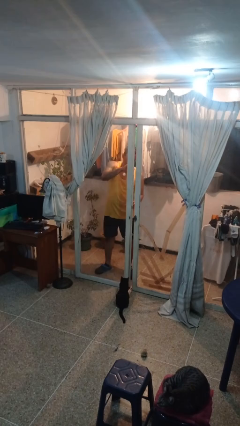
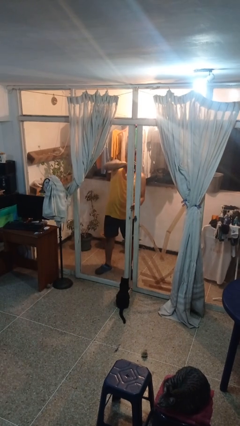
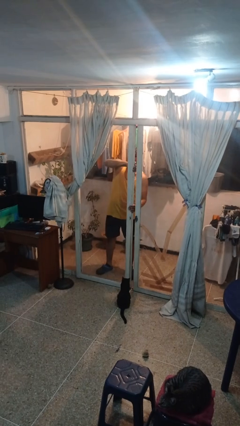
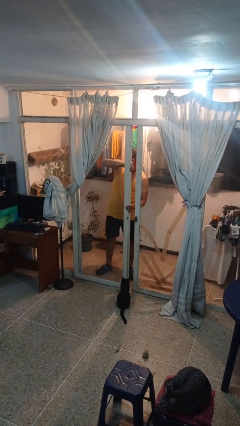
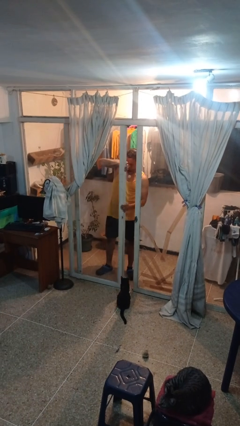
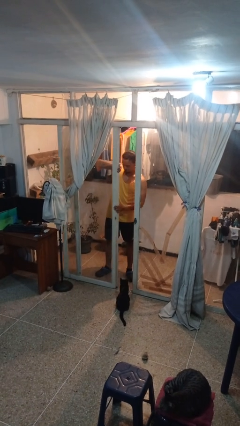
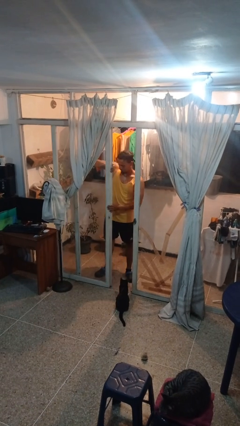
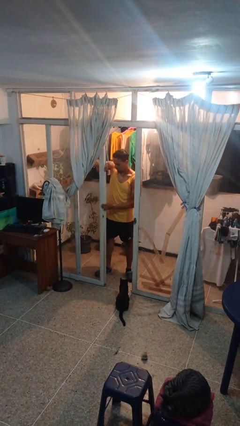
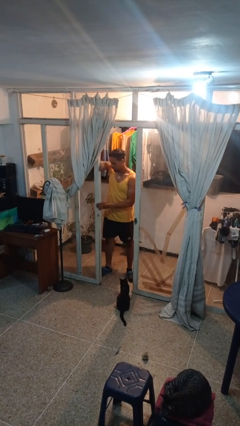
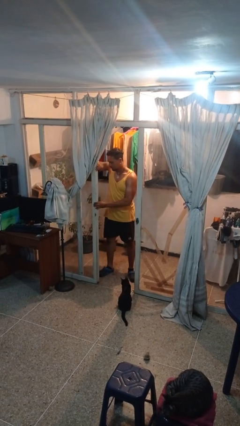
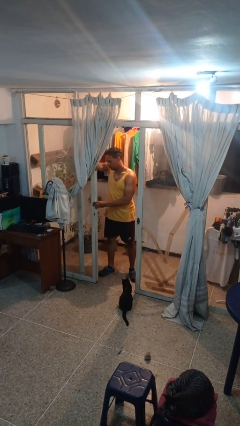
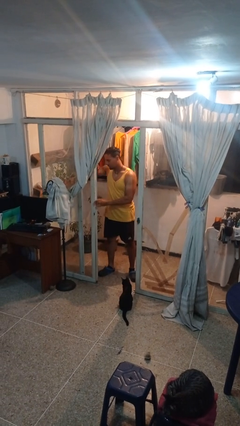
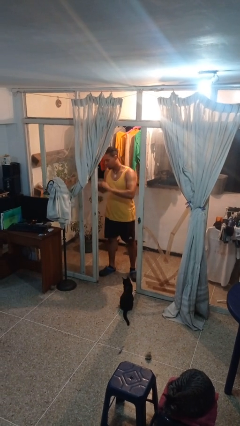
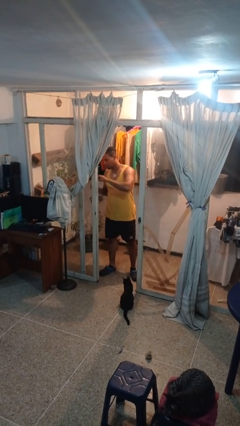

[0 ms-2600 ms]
person opens sliding door

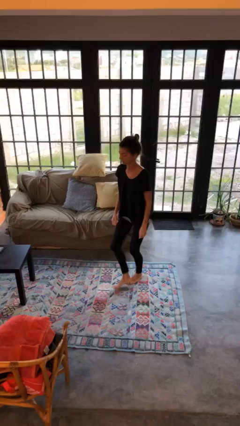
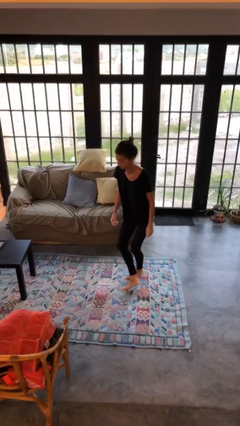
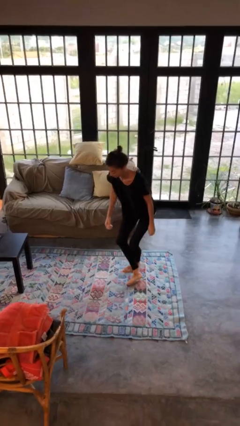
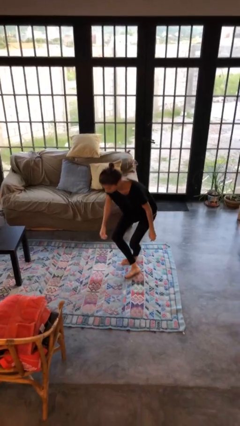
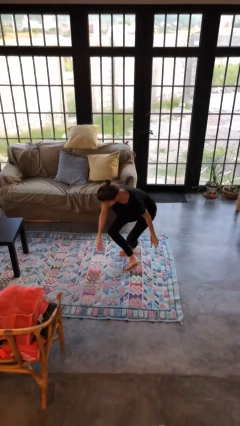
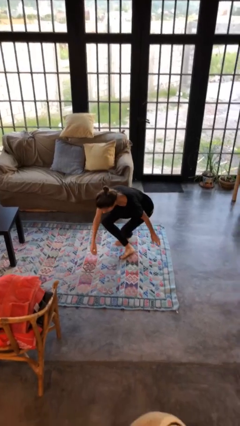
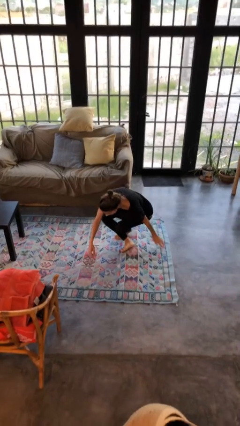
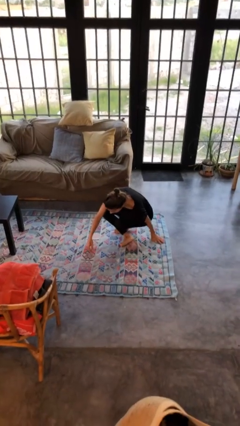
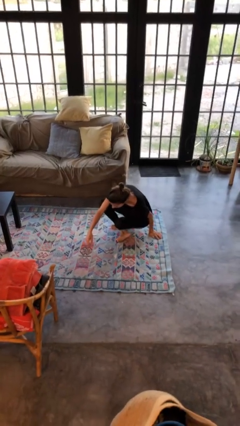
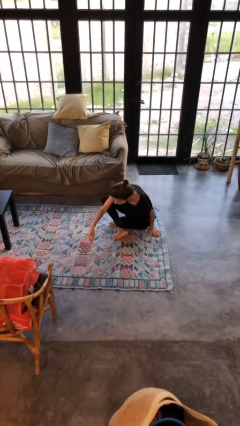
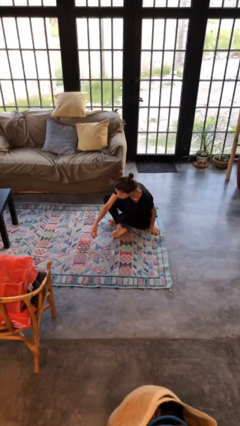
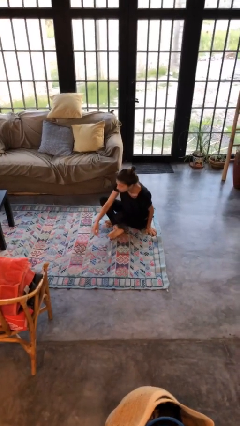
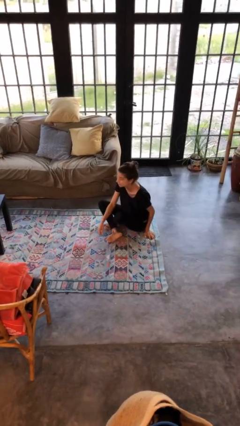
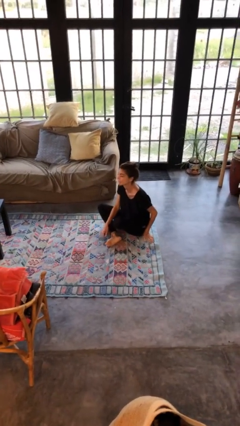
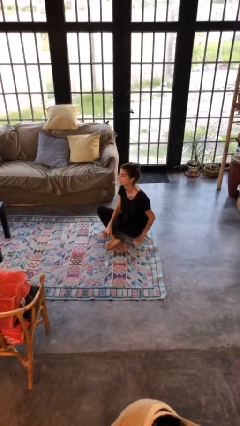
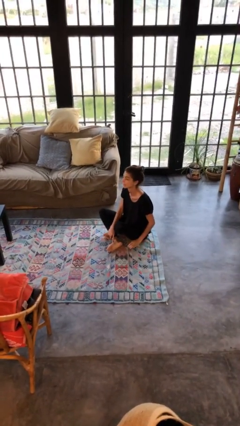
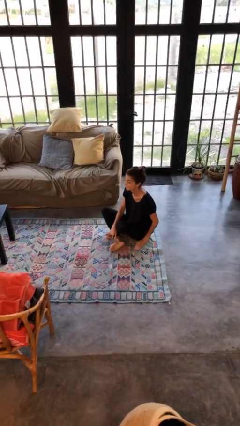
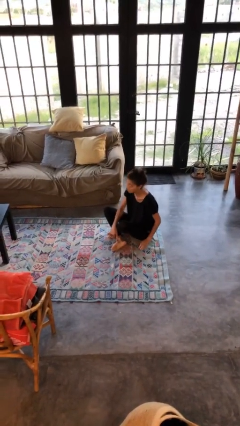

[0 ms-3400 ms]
person sits crisscross

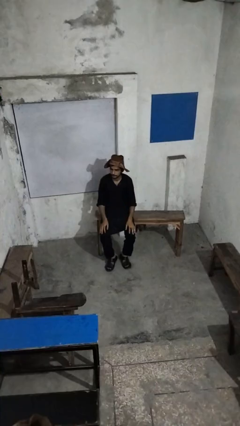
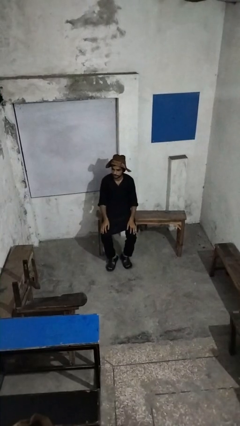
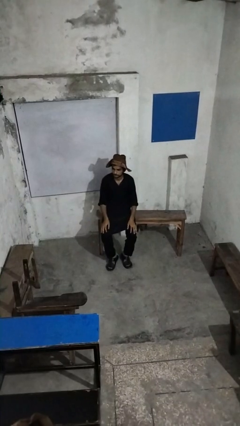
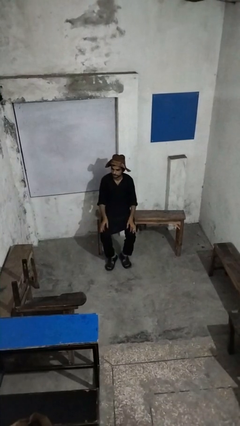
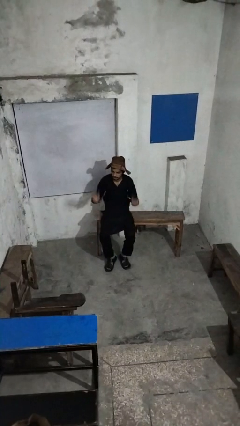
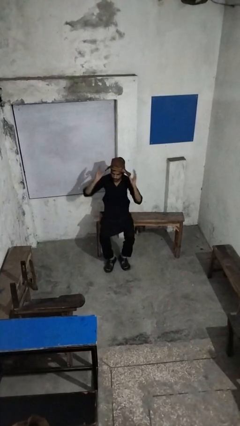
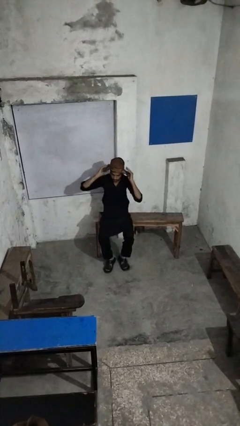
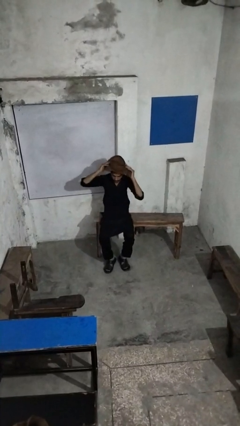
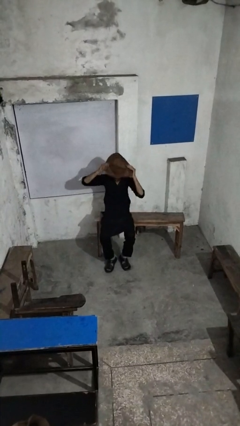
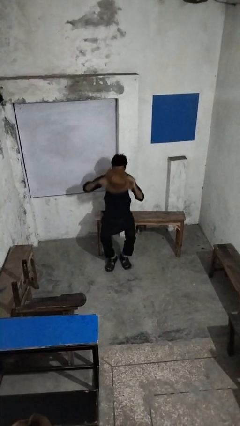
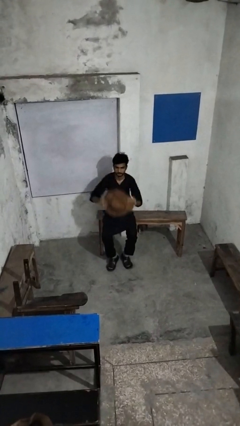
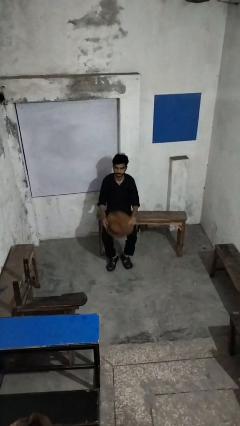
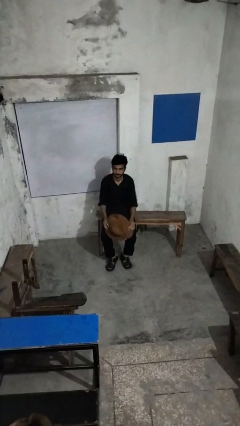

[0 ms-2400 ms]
person takes off hat

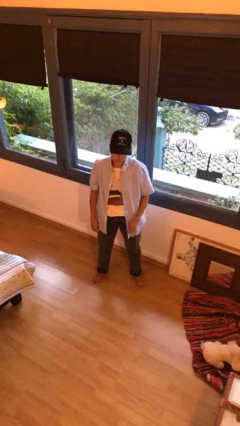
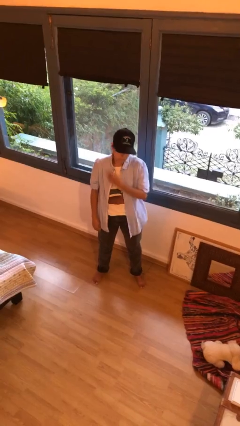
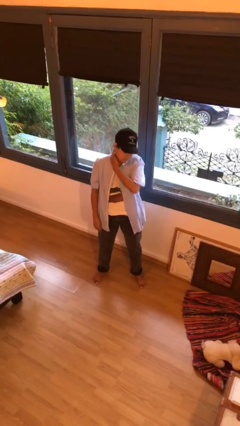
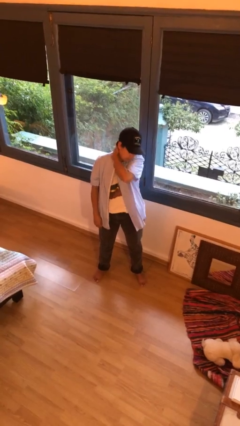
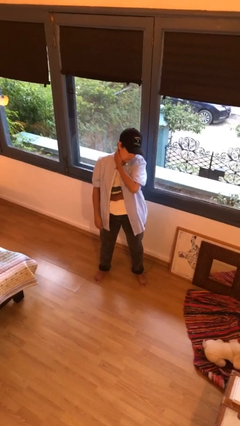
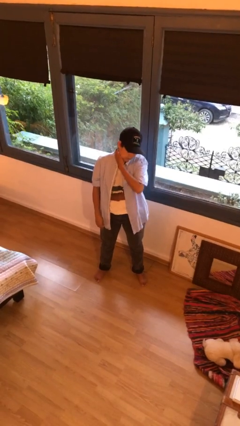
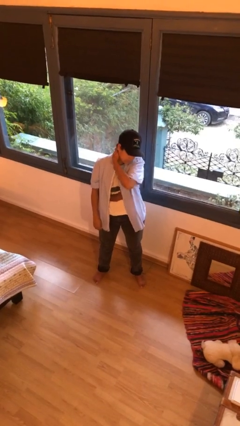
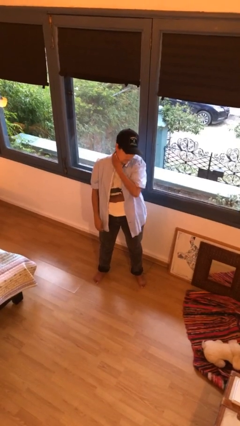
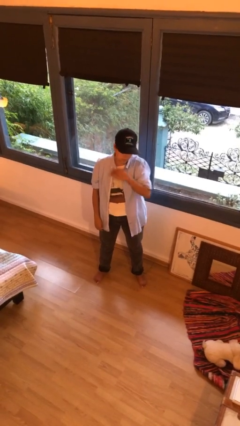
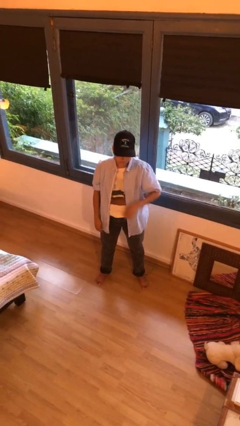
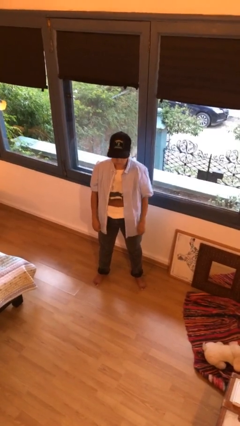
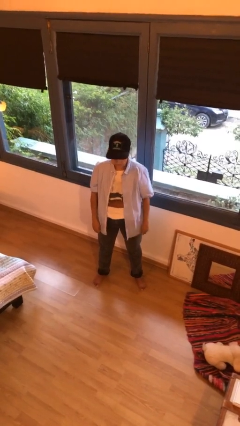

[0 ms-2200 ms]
person rubs neck

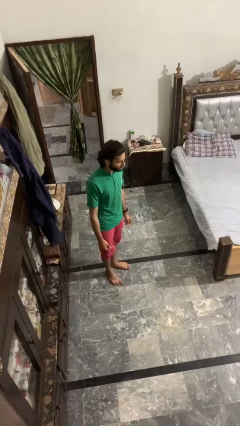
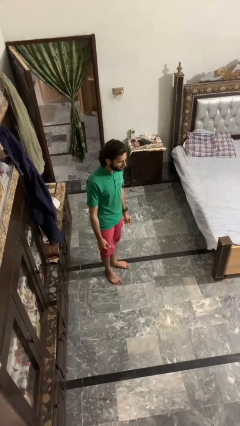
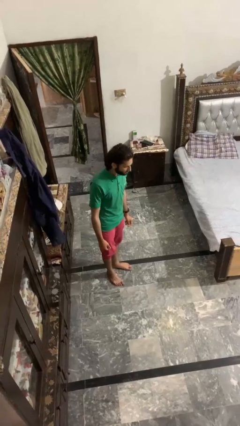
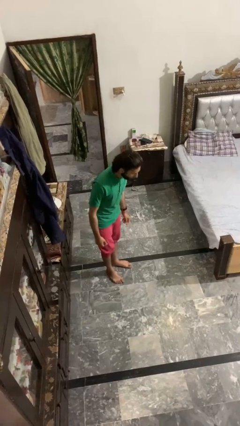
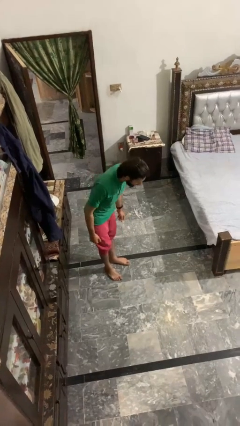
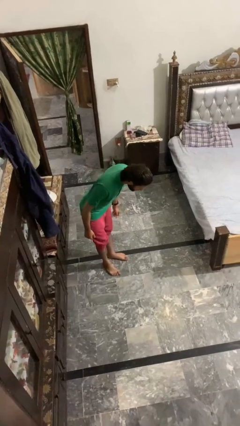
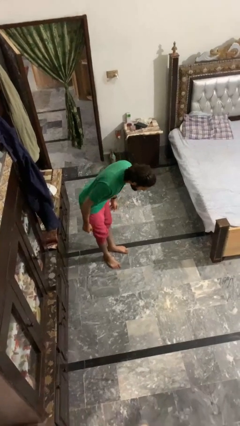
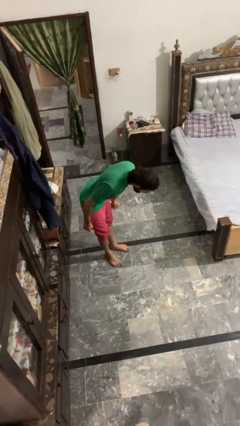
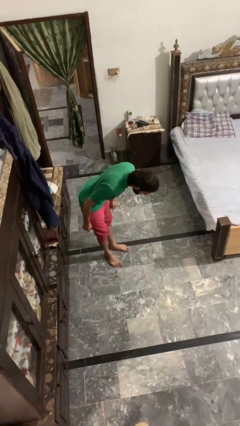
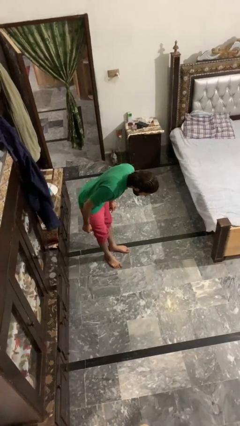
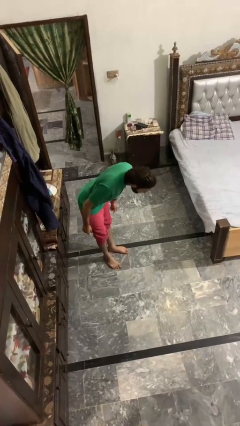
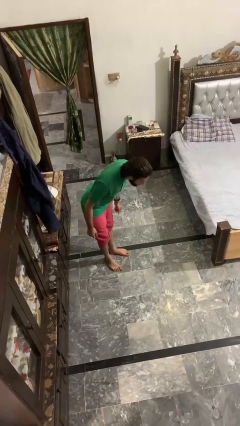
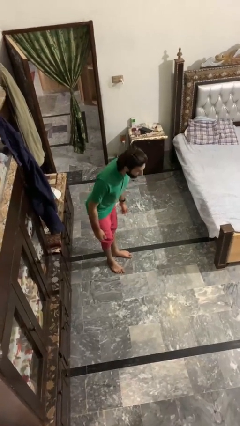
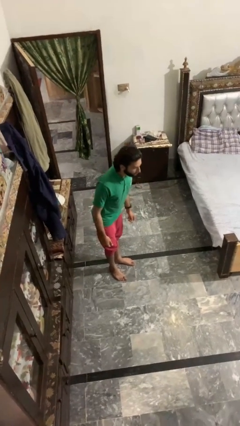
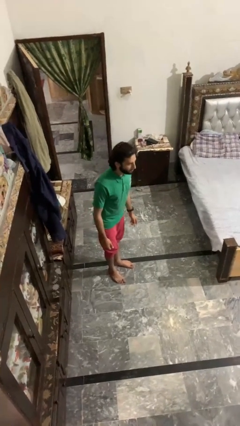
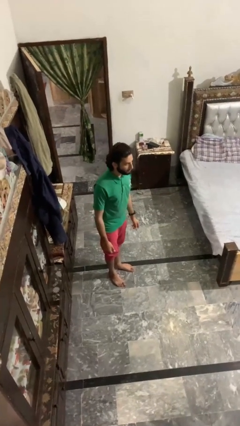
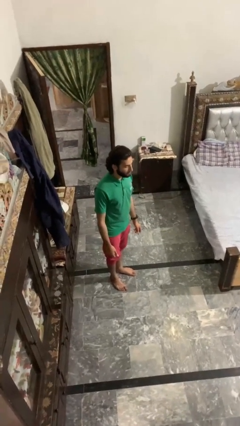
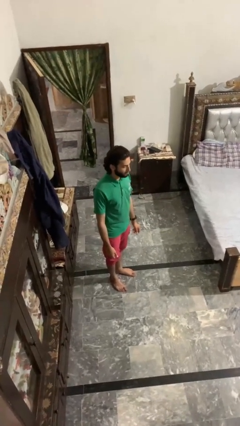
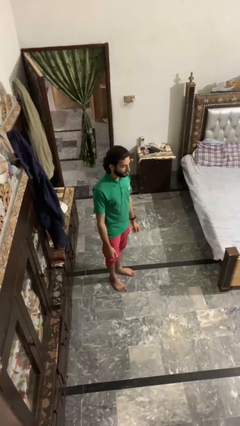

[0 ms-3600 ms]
person bows

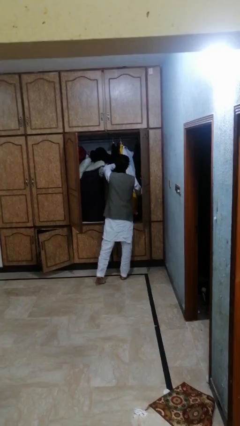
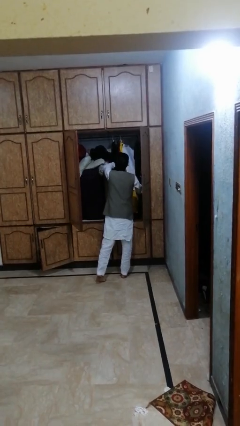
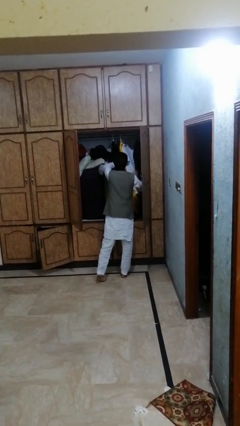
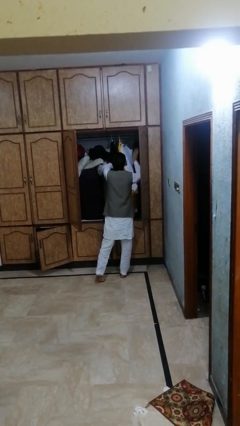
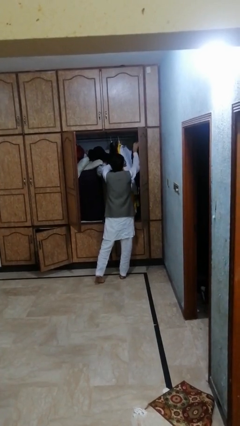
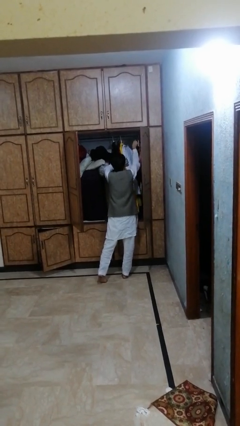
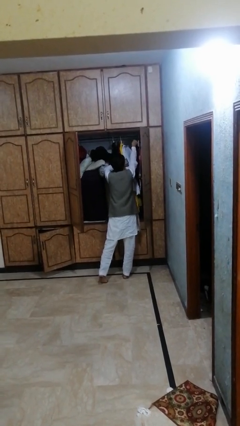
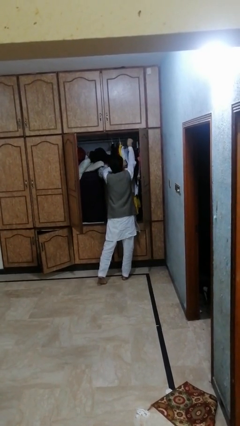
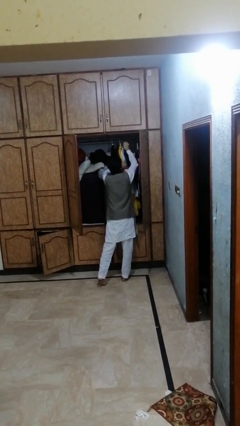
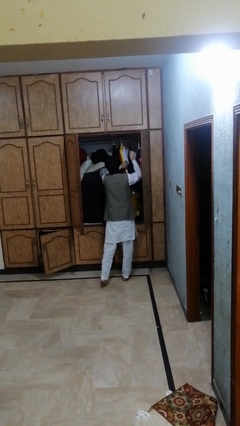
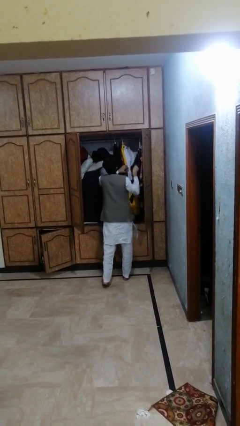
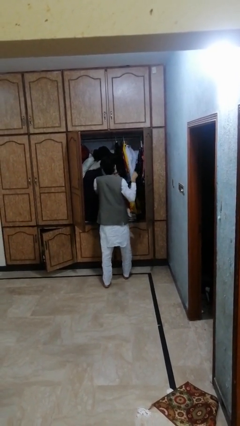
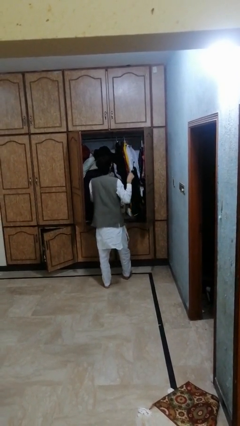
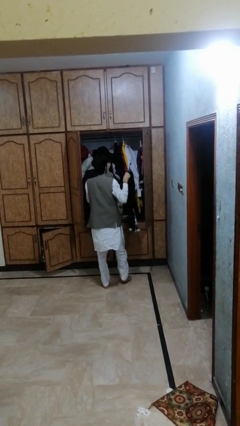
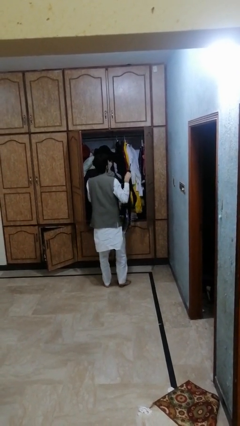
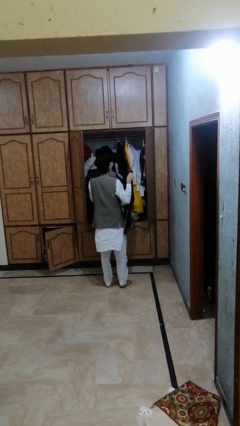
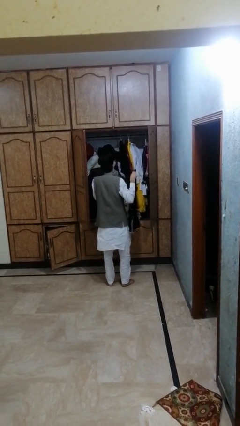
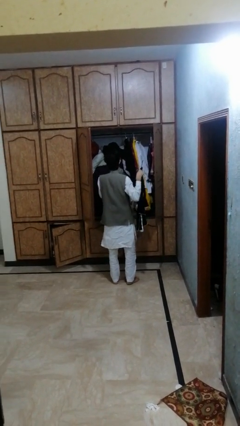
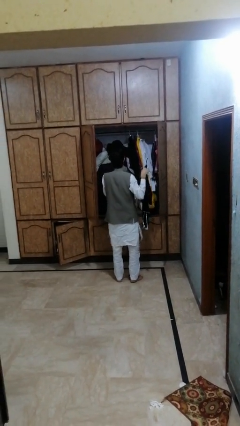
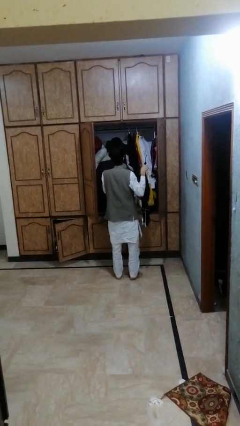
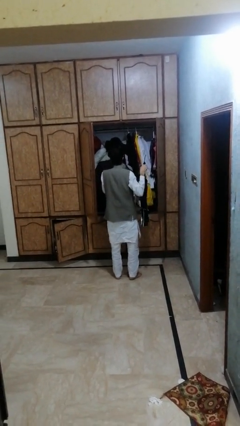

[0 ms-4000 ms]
person takes clothes from dresser
